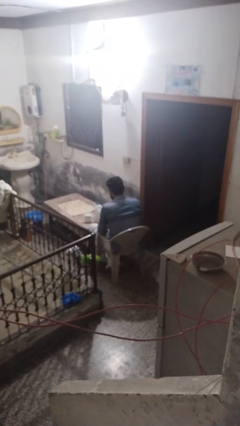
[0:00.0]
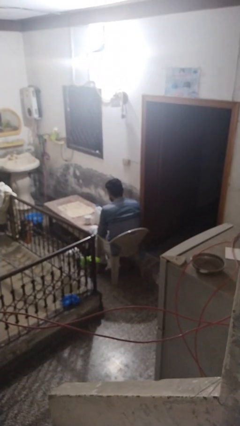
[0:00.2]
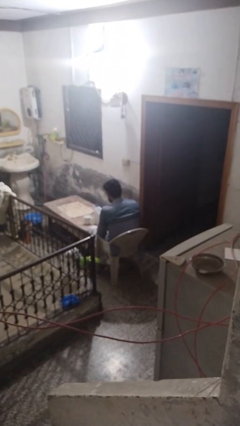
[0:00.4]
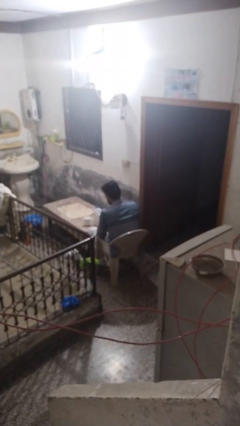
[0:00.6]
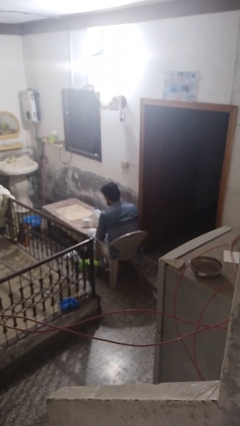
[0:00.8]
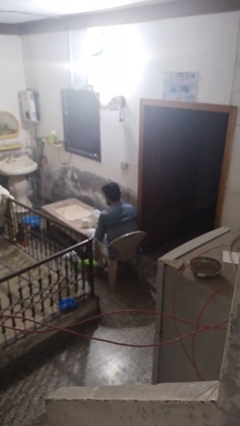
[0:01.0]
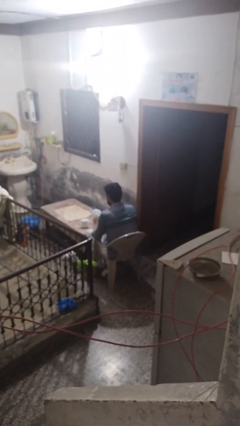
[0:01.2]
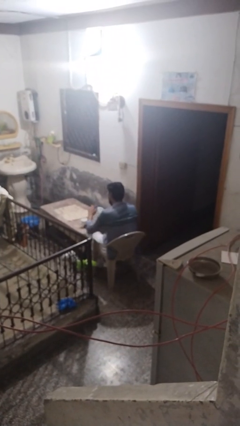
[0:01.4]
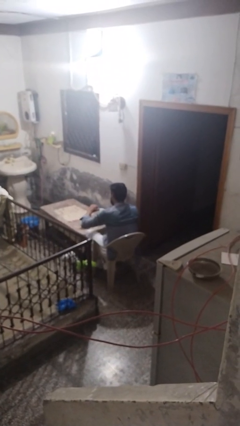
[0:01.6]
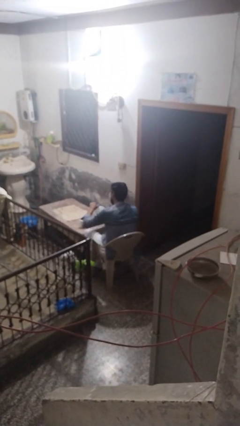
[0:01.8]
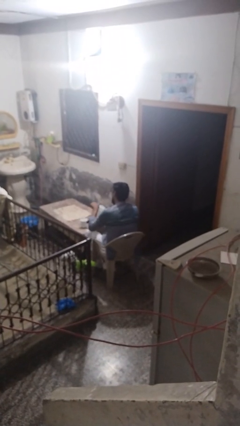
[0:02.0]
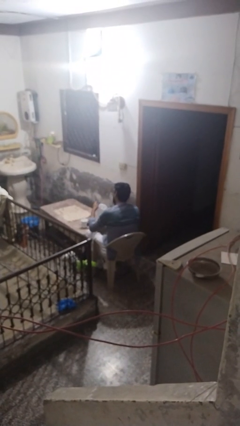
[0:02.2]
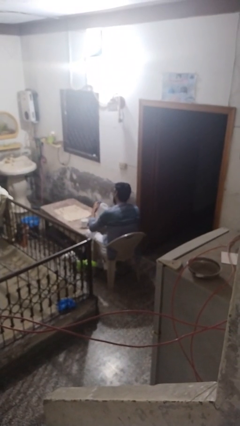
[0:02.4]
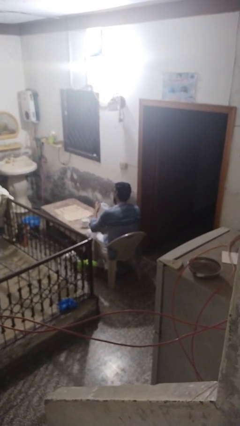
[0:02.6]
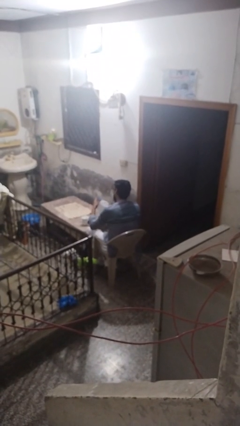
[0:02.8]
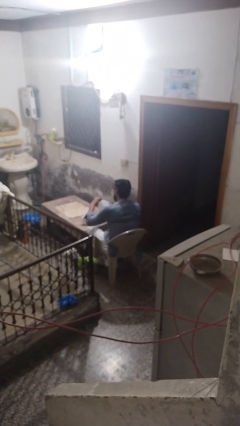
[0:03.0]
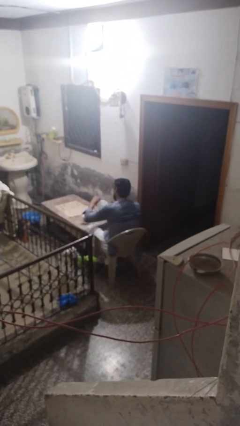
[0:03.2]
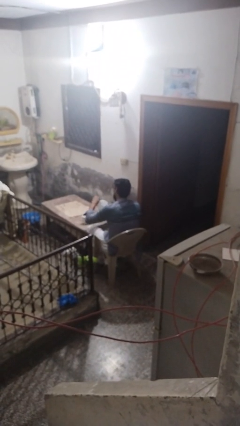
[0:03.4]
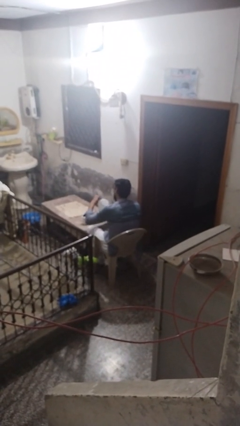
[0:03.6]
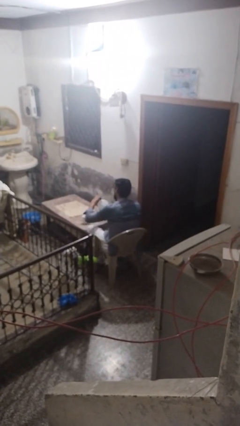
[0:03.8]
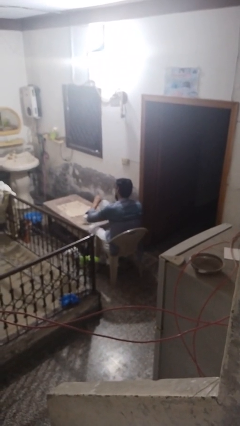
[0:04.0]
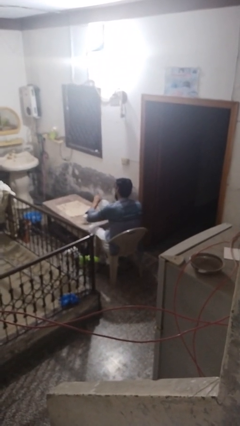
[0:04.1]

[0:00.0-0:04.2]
person unscrews lid from bottle

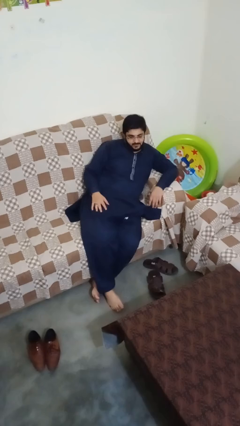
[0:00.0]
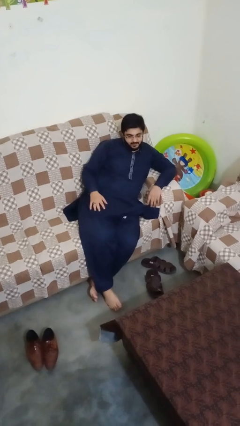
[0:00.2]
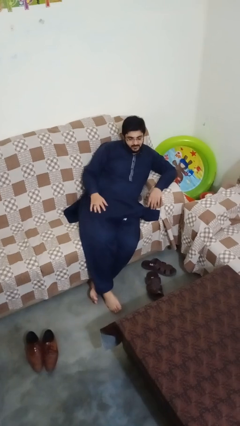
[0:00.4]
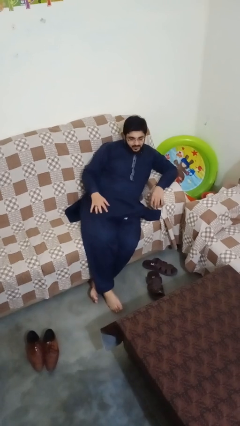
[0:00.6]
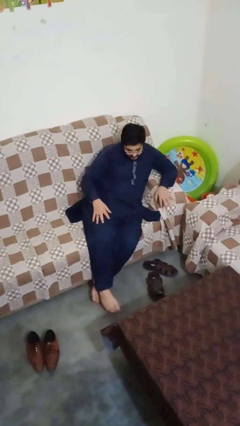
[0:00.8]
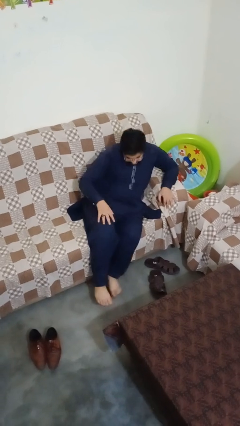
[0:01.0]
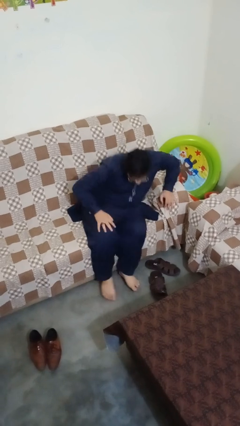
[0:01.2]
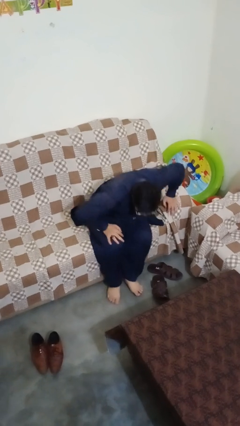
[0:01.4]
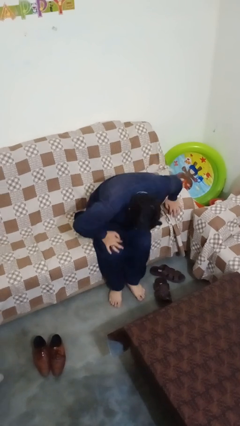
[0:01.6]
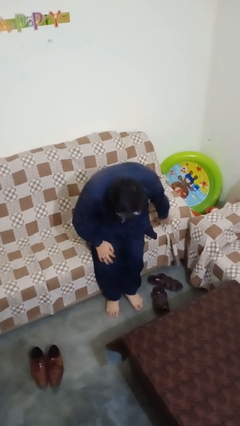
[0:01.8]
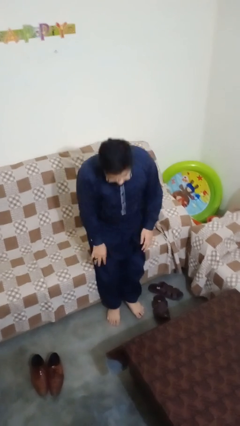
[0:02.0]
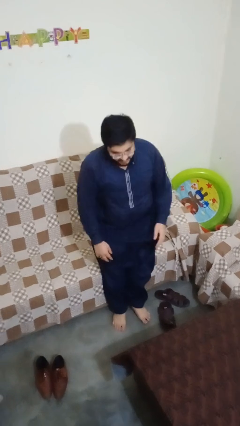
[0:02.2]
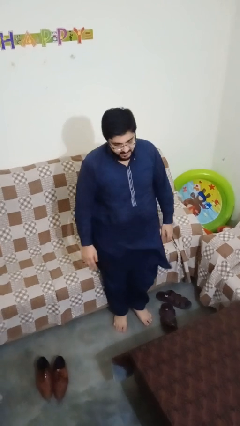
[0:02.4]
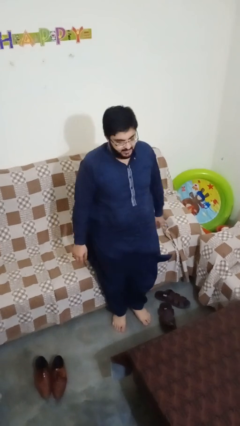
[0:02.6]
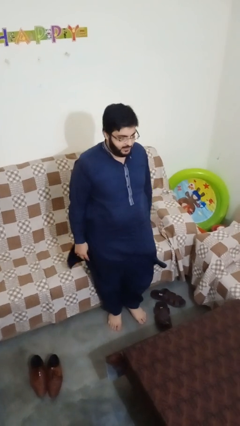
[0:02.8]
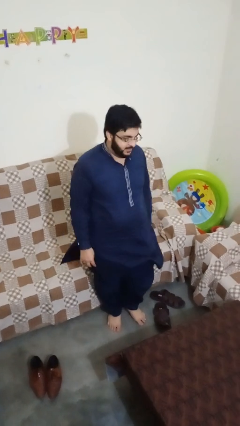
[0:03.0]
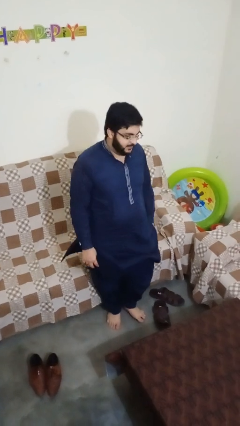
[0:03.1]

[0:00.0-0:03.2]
person stands up

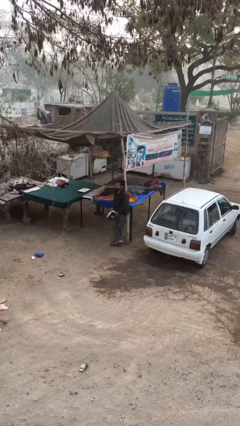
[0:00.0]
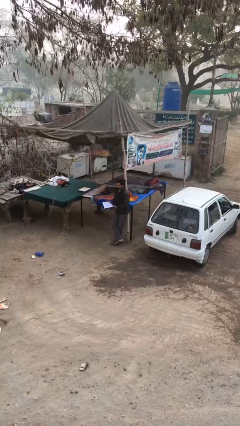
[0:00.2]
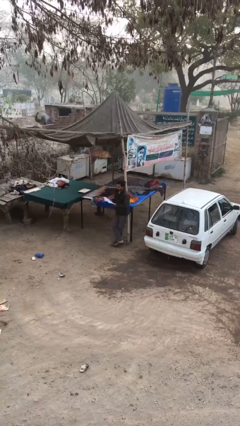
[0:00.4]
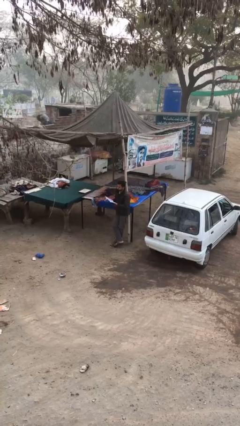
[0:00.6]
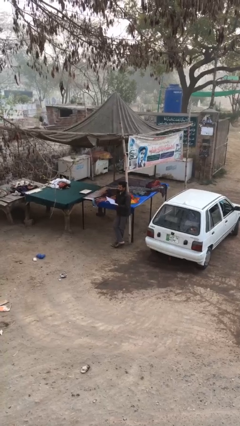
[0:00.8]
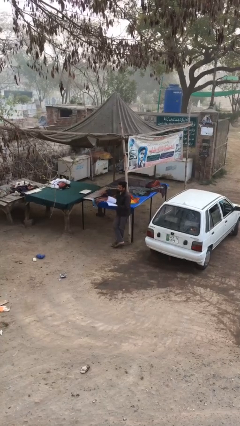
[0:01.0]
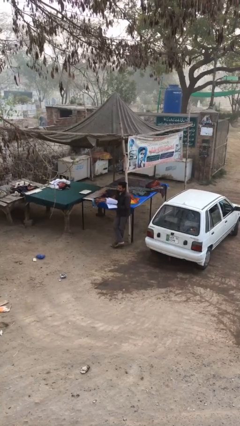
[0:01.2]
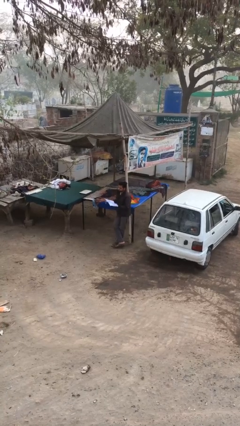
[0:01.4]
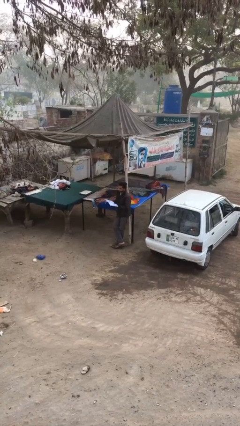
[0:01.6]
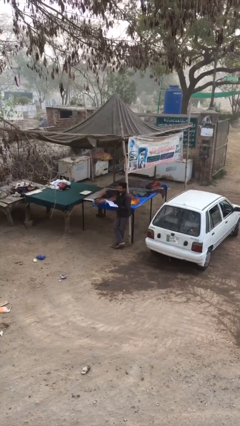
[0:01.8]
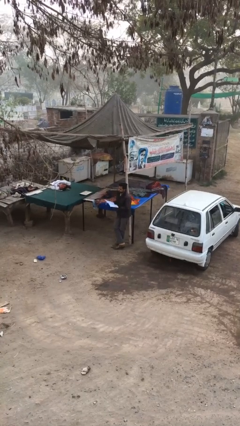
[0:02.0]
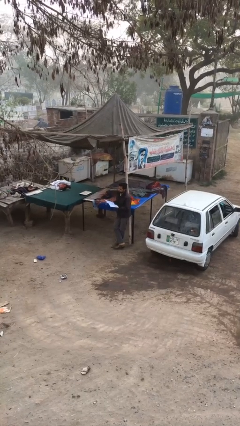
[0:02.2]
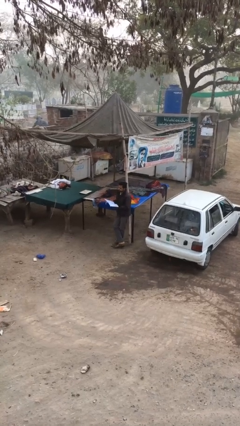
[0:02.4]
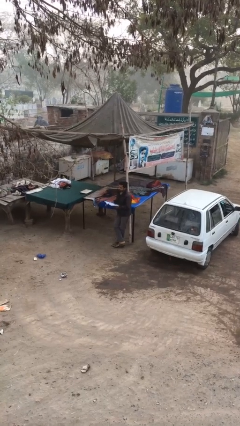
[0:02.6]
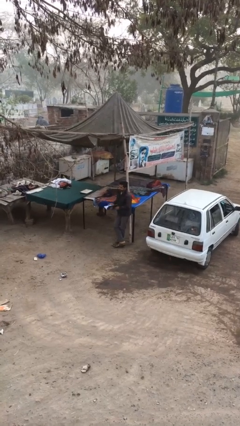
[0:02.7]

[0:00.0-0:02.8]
person reads document

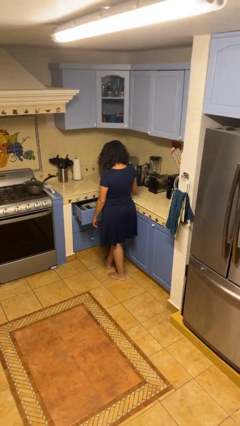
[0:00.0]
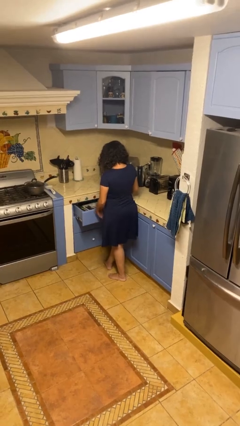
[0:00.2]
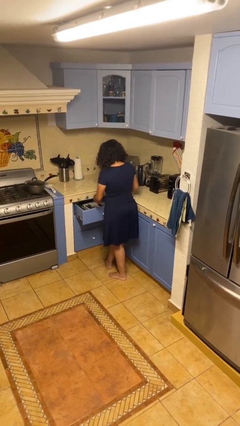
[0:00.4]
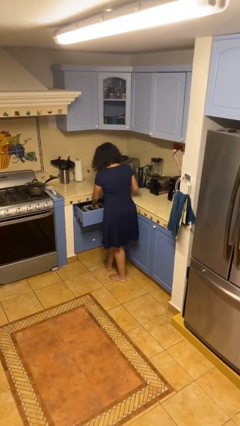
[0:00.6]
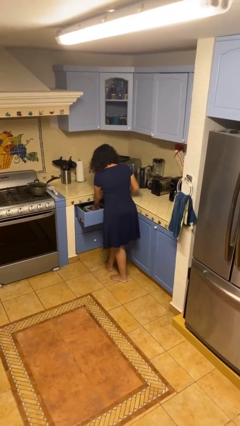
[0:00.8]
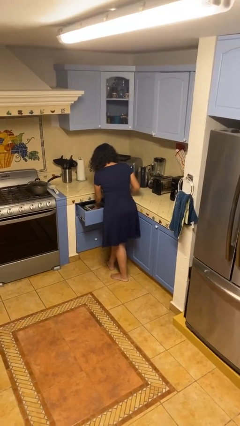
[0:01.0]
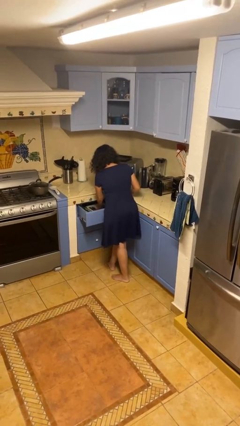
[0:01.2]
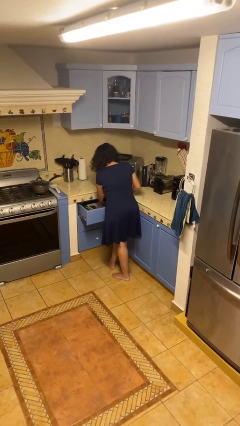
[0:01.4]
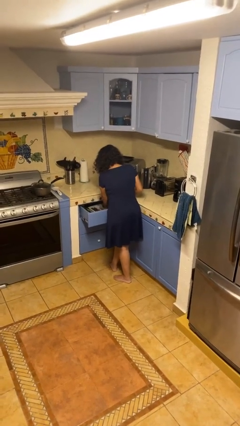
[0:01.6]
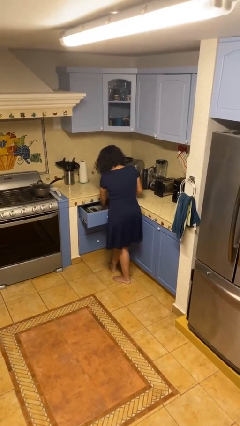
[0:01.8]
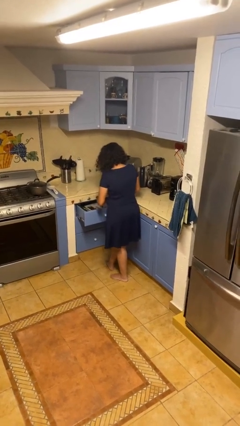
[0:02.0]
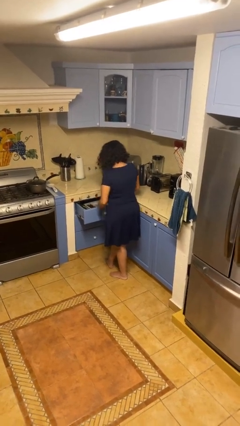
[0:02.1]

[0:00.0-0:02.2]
person searches in kitchen drawer

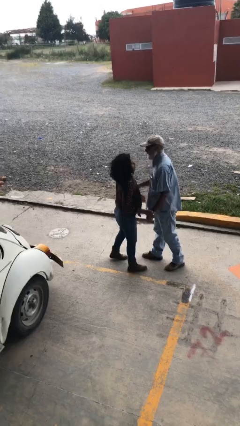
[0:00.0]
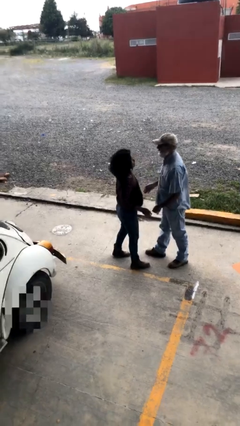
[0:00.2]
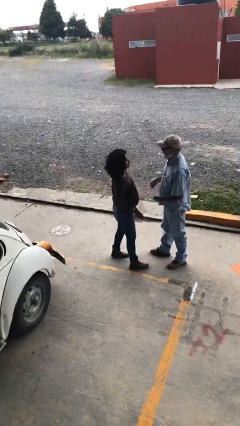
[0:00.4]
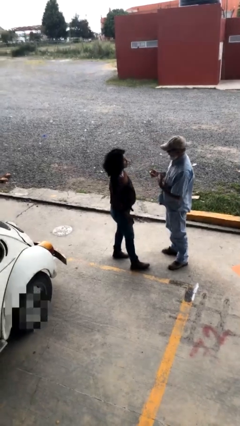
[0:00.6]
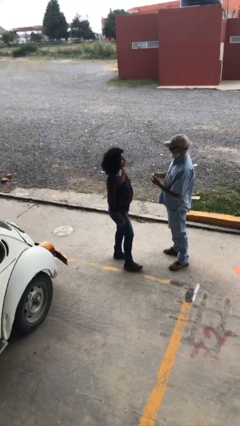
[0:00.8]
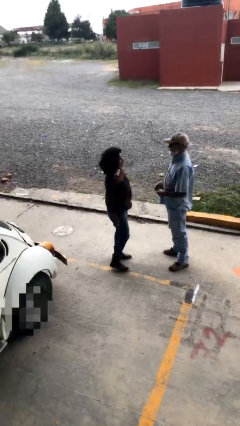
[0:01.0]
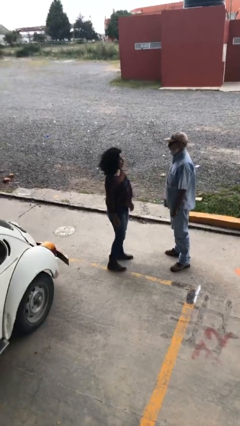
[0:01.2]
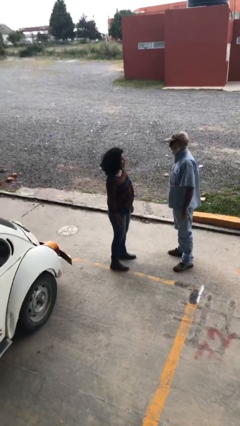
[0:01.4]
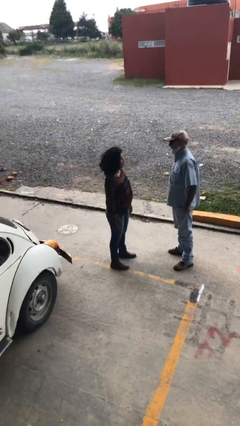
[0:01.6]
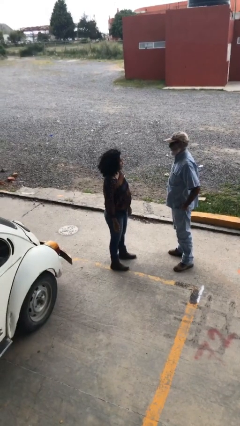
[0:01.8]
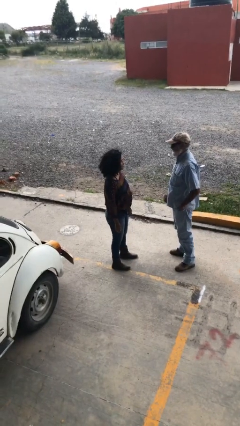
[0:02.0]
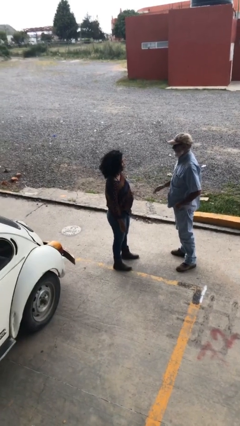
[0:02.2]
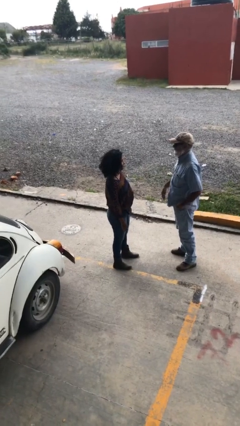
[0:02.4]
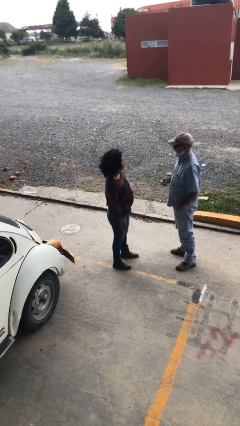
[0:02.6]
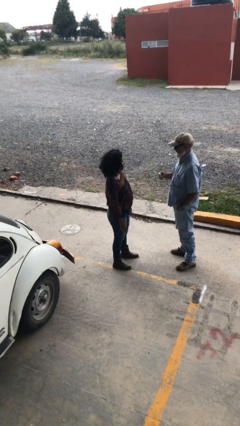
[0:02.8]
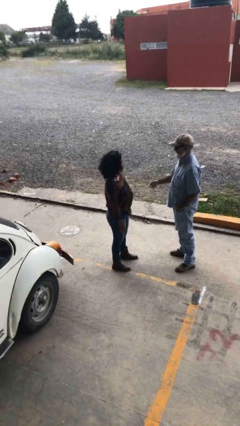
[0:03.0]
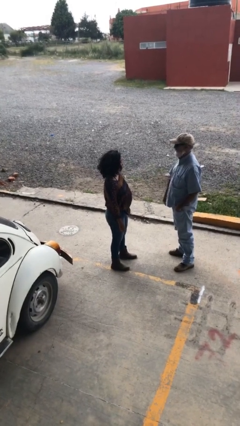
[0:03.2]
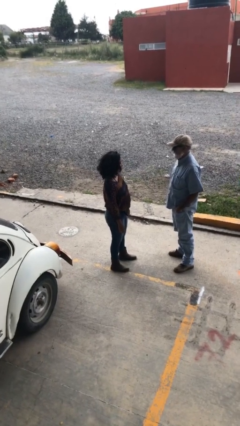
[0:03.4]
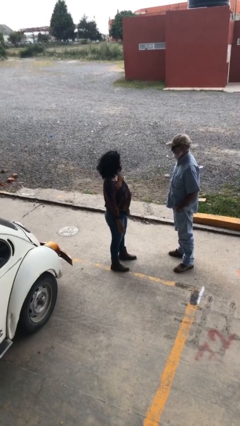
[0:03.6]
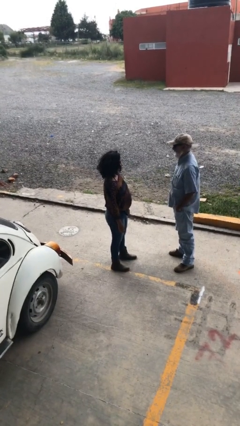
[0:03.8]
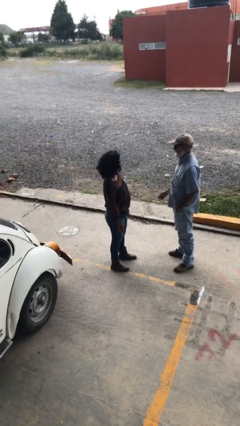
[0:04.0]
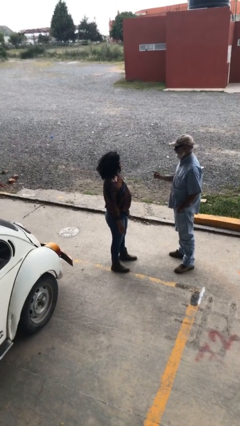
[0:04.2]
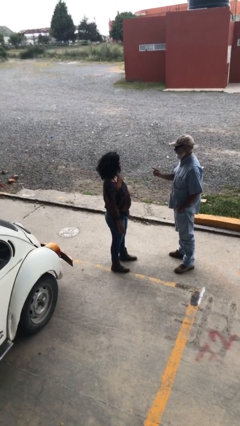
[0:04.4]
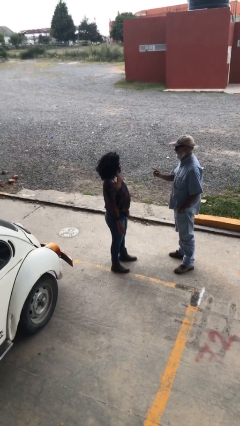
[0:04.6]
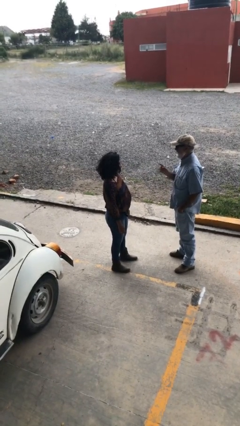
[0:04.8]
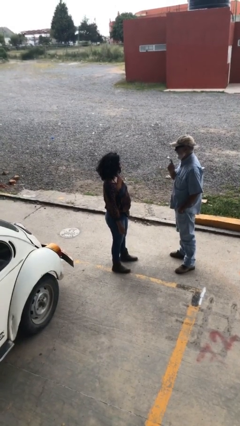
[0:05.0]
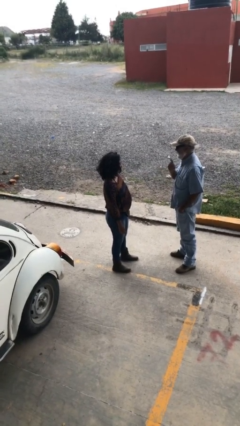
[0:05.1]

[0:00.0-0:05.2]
person talks to person
